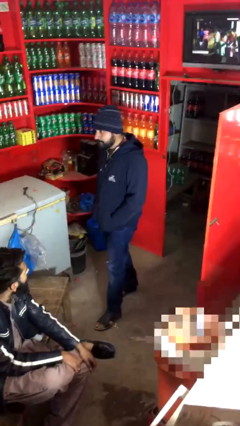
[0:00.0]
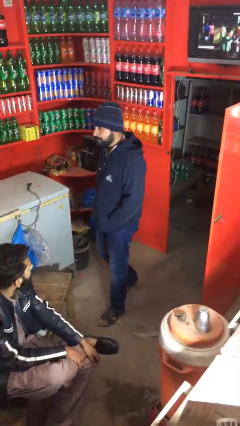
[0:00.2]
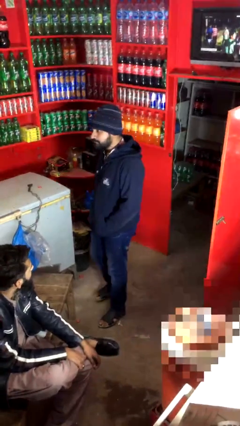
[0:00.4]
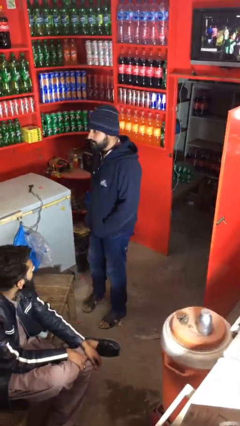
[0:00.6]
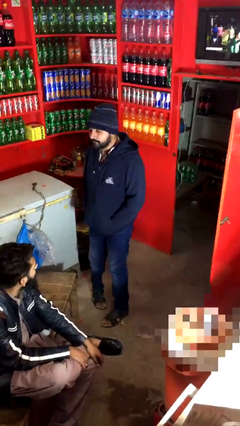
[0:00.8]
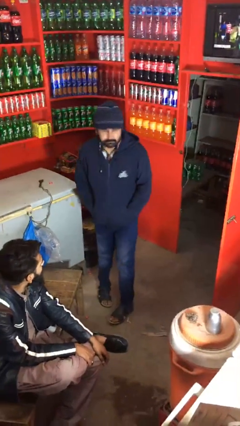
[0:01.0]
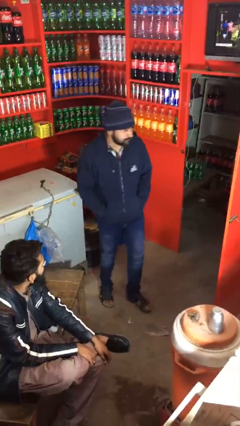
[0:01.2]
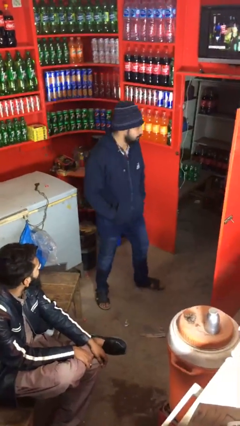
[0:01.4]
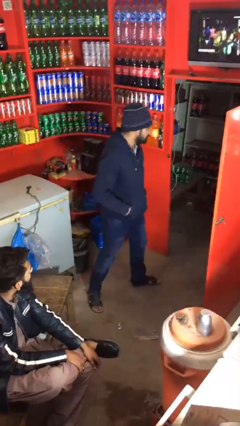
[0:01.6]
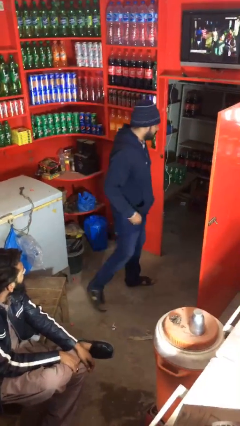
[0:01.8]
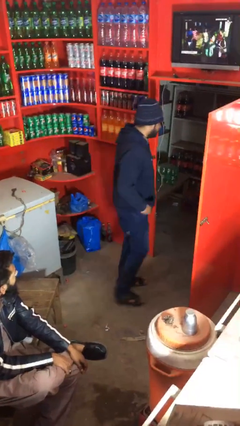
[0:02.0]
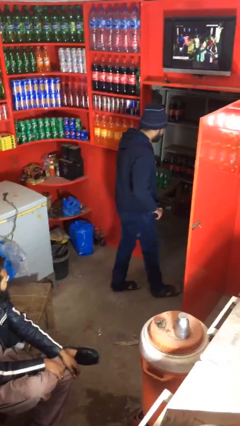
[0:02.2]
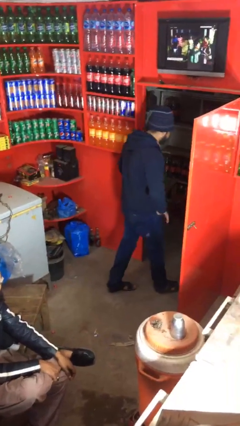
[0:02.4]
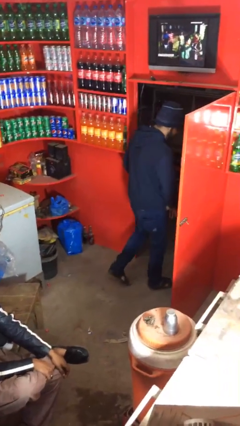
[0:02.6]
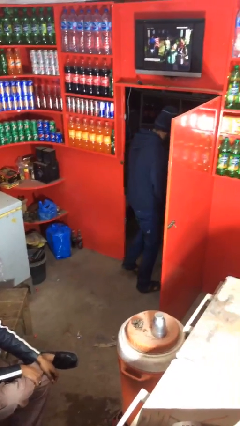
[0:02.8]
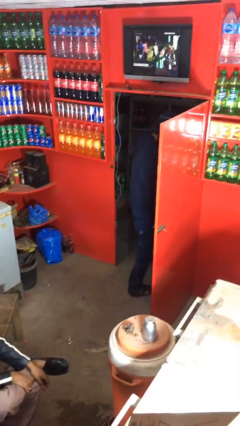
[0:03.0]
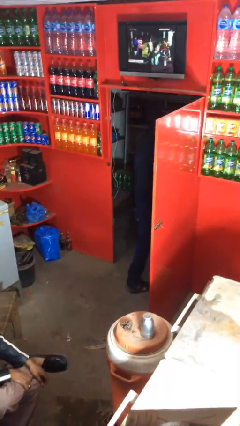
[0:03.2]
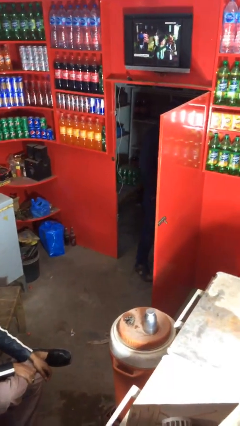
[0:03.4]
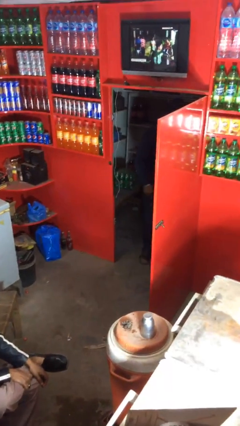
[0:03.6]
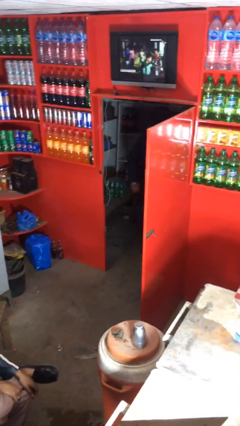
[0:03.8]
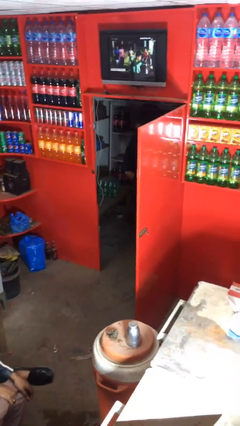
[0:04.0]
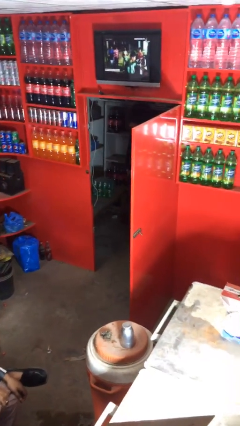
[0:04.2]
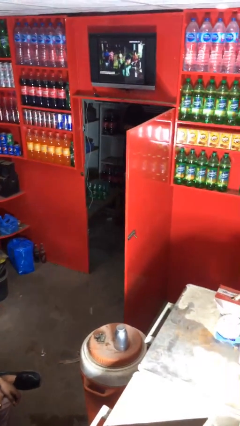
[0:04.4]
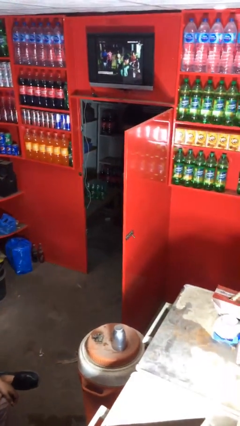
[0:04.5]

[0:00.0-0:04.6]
person enters scene through structure

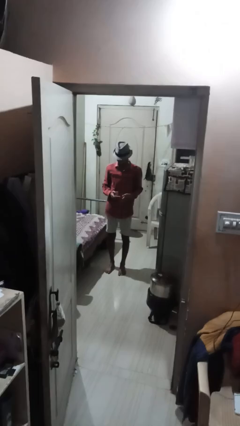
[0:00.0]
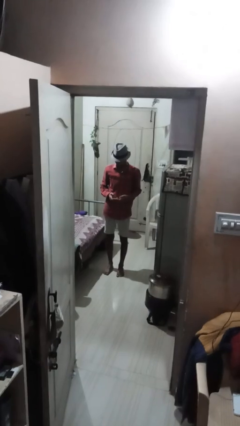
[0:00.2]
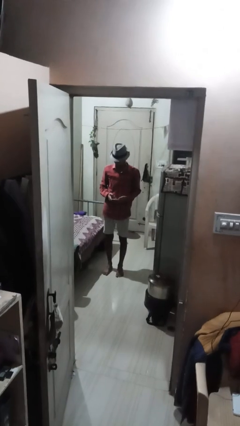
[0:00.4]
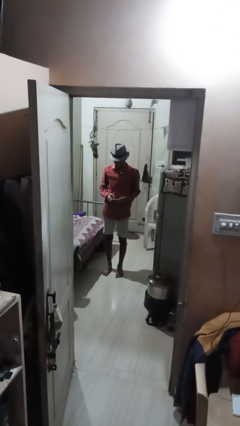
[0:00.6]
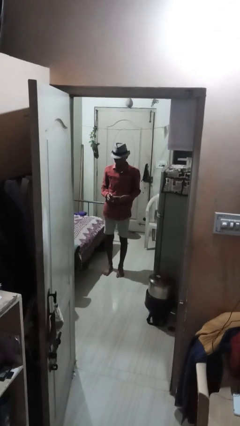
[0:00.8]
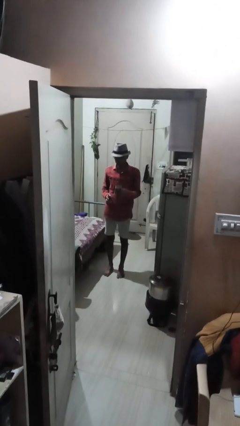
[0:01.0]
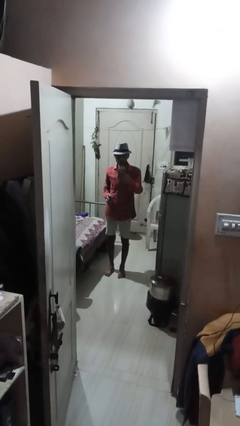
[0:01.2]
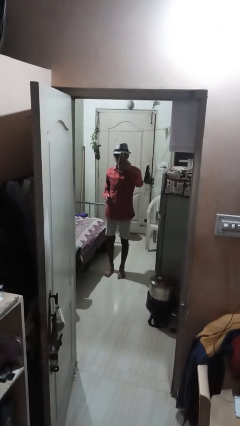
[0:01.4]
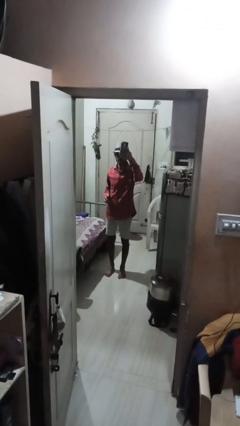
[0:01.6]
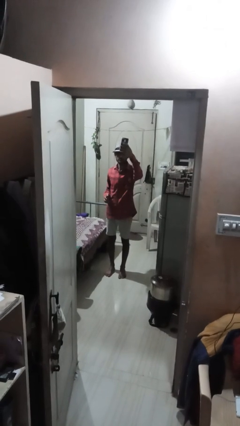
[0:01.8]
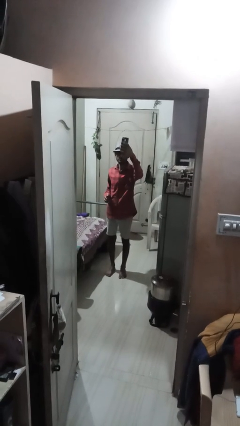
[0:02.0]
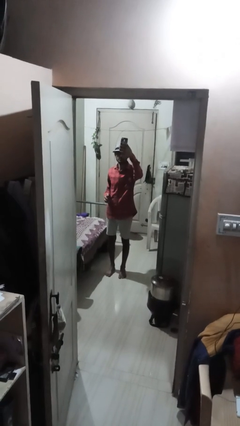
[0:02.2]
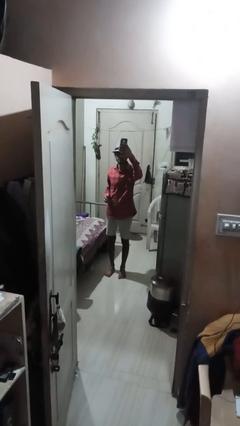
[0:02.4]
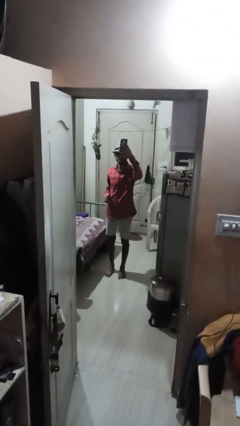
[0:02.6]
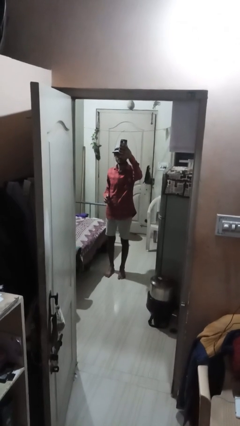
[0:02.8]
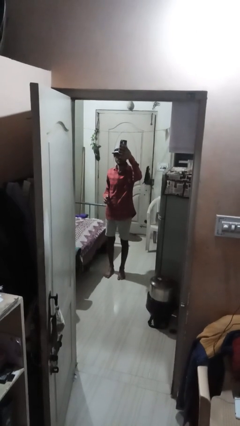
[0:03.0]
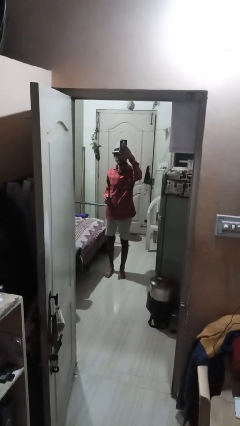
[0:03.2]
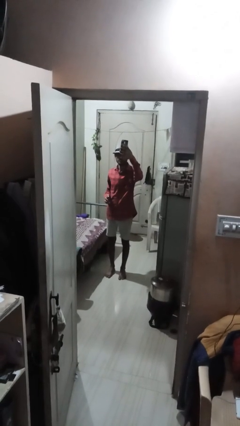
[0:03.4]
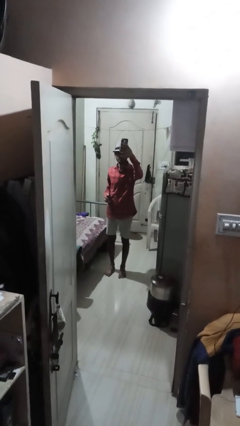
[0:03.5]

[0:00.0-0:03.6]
person takes selfie

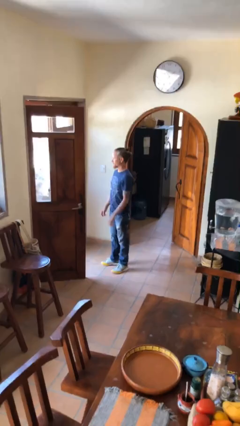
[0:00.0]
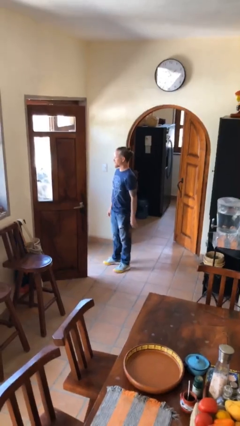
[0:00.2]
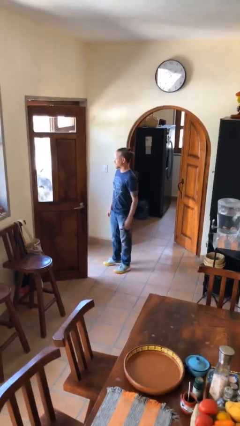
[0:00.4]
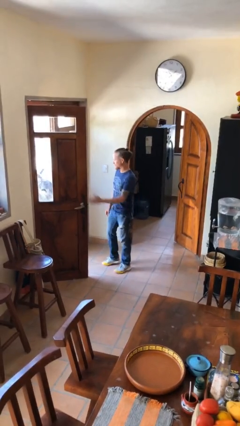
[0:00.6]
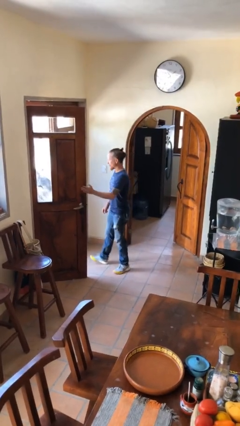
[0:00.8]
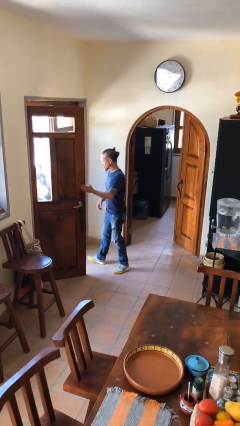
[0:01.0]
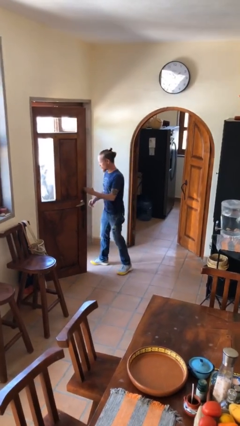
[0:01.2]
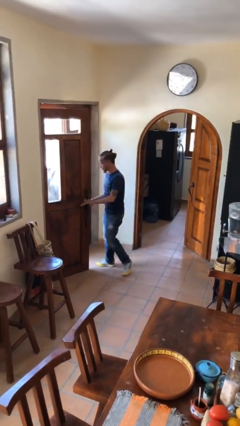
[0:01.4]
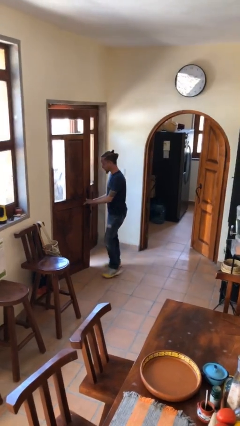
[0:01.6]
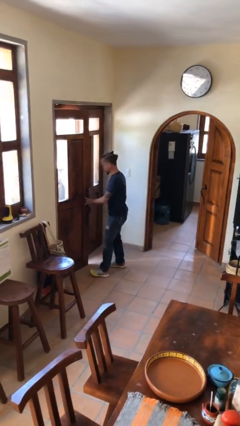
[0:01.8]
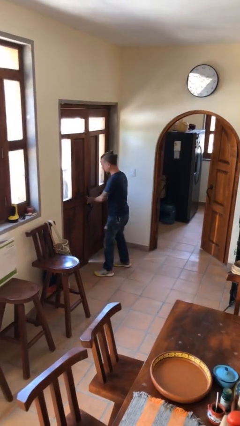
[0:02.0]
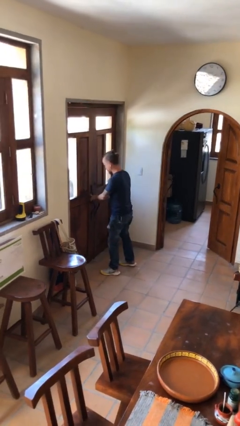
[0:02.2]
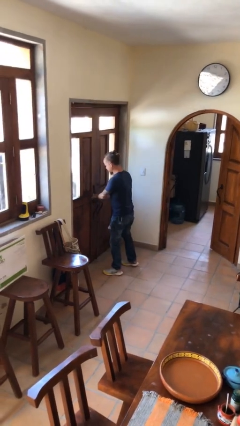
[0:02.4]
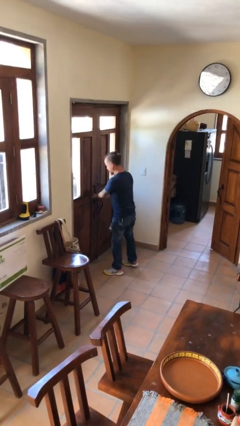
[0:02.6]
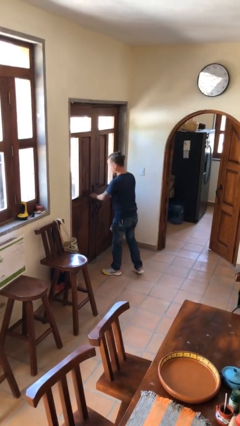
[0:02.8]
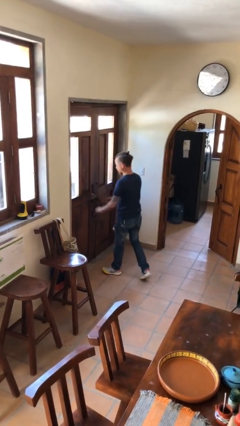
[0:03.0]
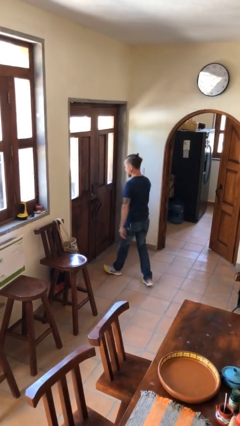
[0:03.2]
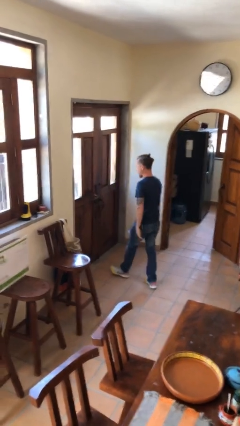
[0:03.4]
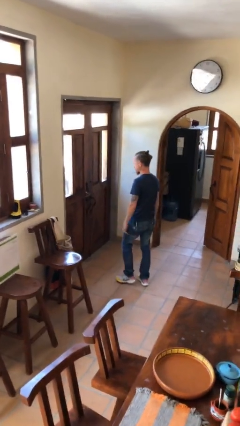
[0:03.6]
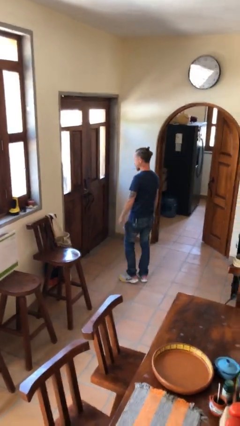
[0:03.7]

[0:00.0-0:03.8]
person closes facility door

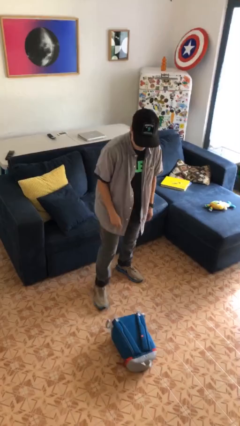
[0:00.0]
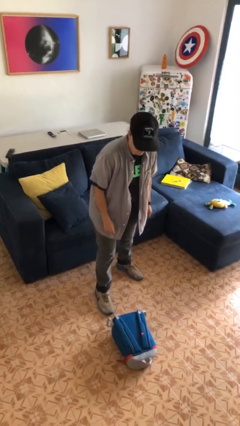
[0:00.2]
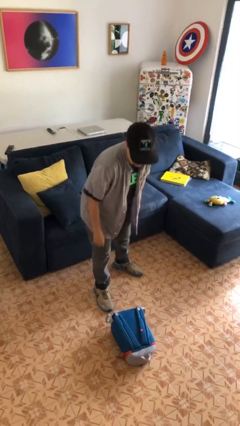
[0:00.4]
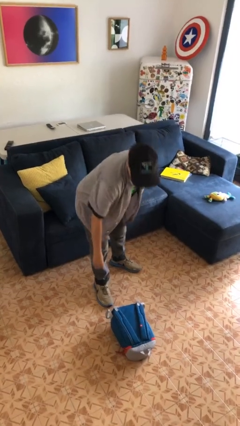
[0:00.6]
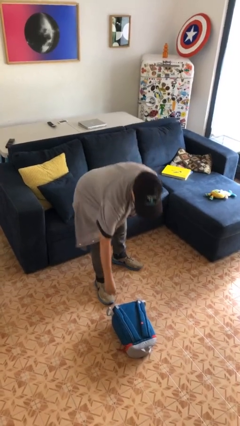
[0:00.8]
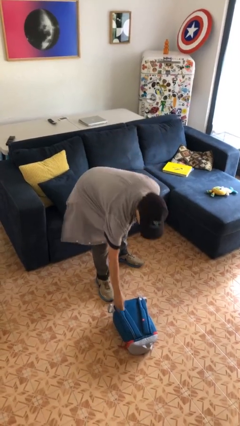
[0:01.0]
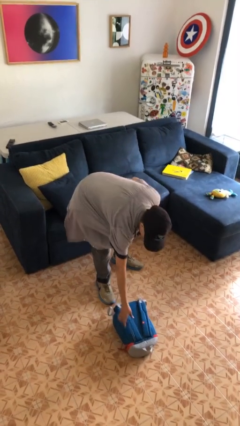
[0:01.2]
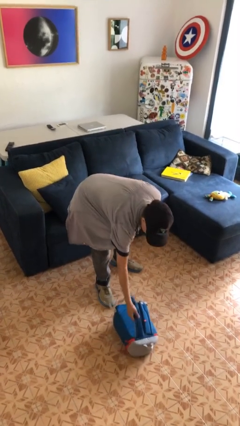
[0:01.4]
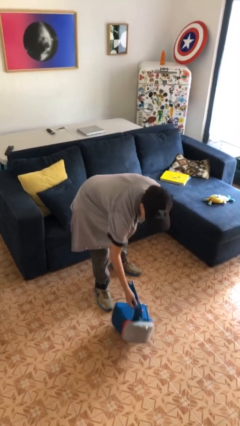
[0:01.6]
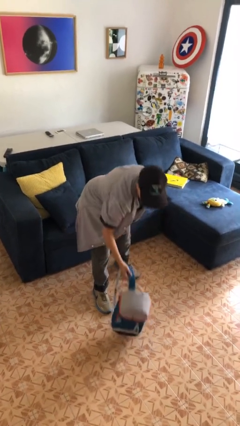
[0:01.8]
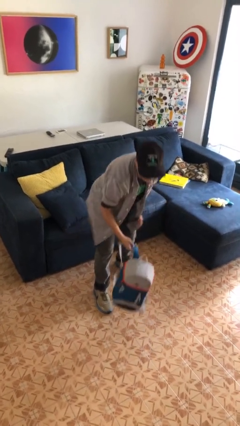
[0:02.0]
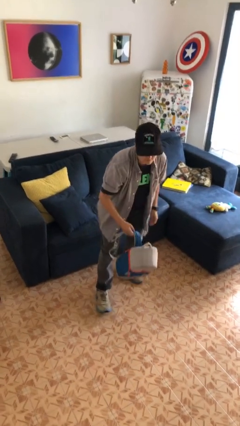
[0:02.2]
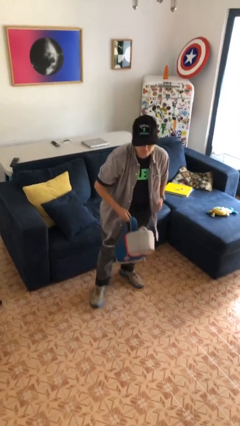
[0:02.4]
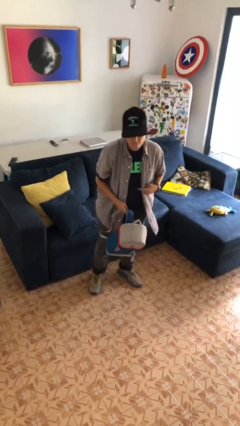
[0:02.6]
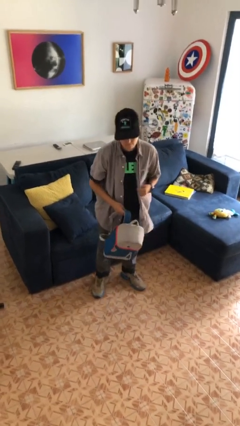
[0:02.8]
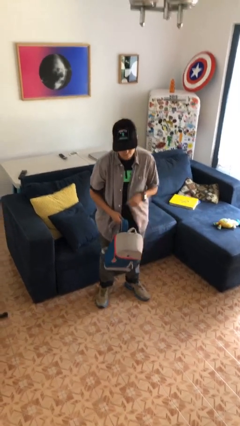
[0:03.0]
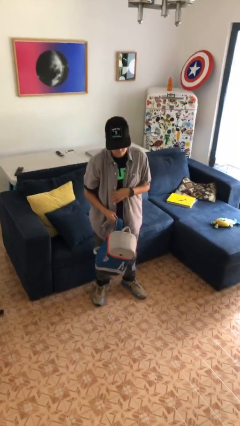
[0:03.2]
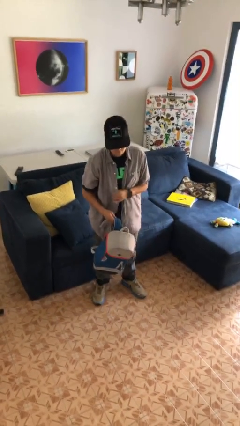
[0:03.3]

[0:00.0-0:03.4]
person picks up object from floor

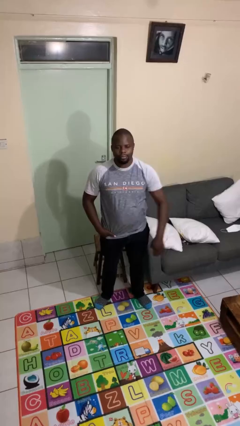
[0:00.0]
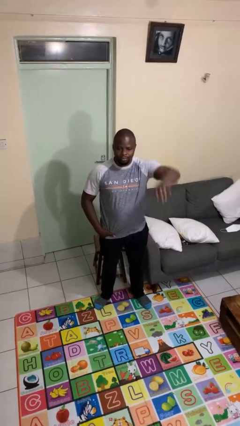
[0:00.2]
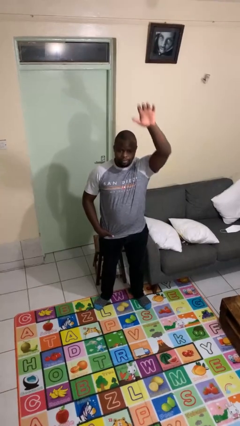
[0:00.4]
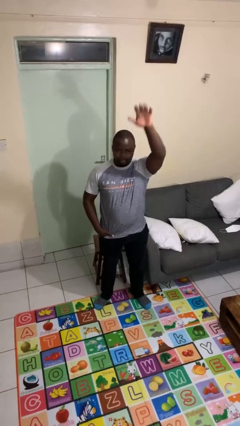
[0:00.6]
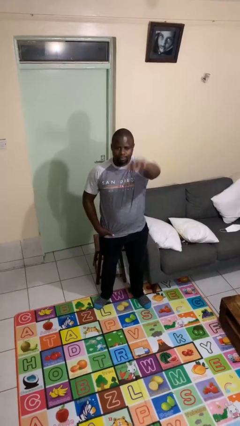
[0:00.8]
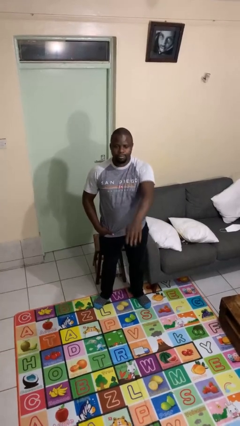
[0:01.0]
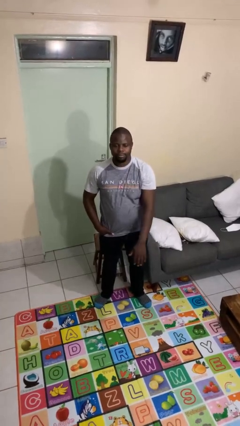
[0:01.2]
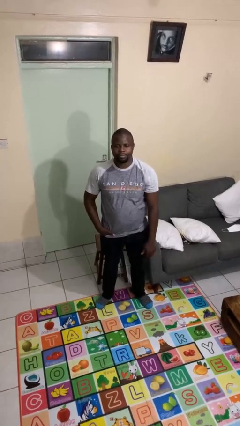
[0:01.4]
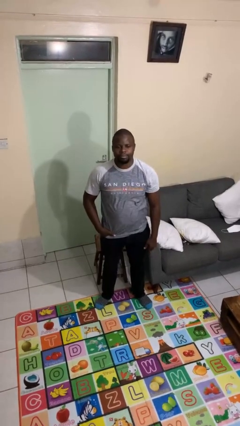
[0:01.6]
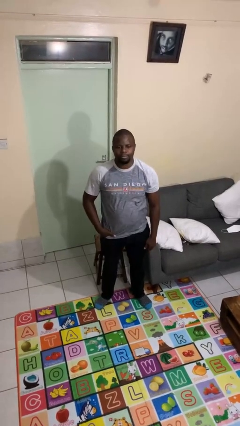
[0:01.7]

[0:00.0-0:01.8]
person gestures swipe down

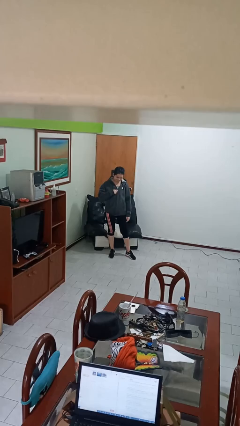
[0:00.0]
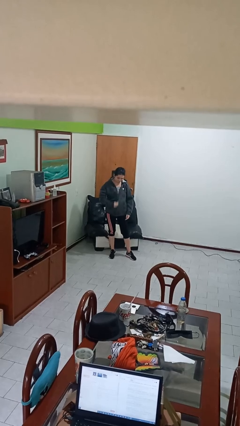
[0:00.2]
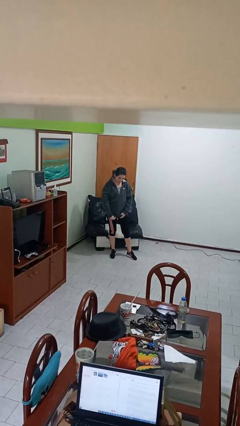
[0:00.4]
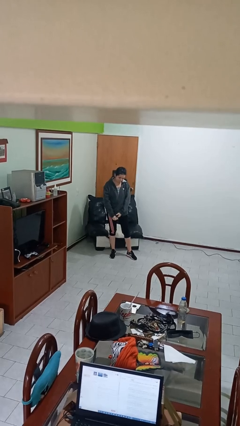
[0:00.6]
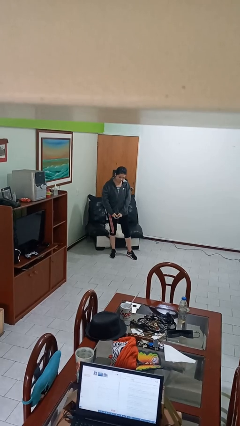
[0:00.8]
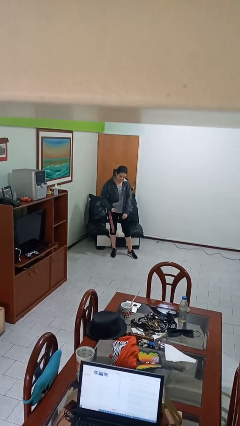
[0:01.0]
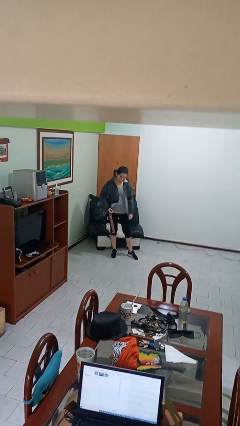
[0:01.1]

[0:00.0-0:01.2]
person unzips jacket
